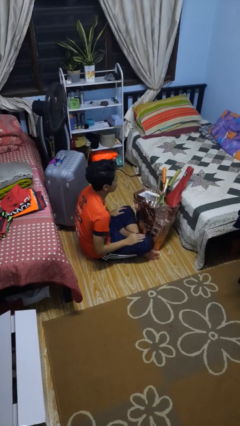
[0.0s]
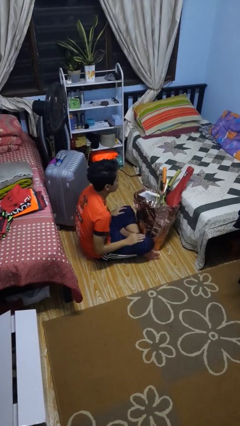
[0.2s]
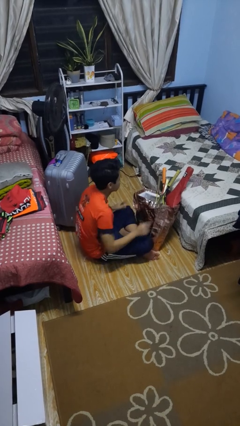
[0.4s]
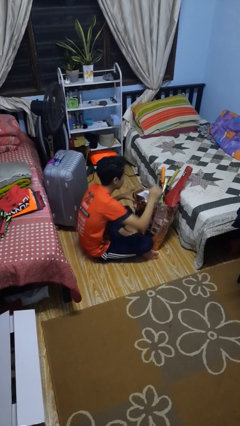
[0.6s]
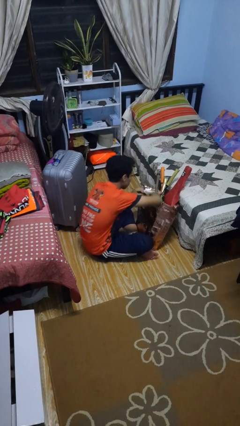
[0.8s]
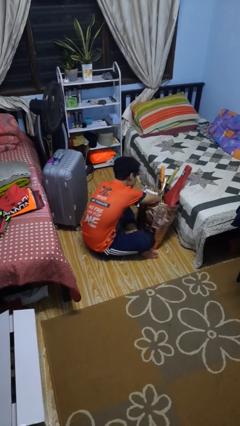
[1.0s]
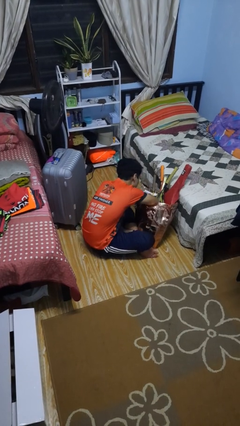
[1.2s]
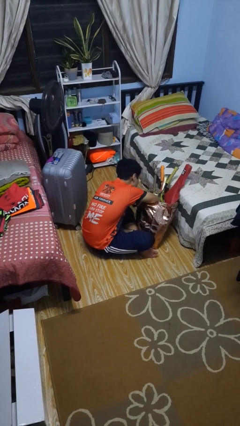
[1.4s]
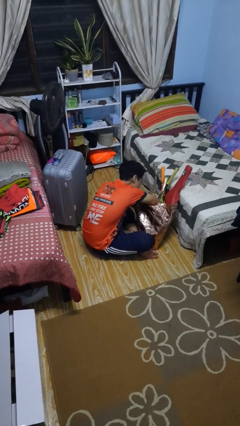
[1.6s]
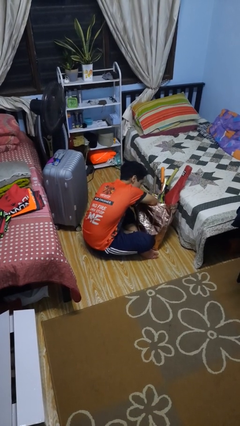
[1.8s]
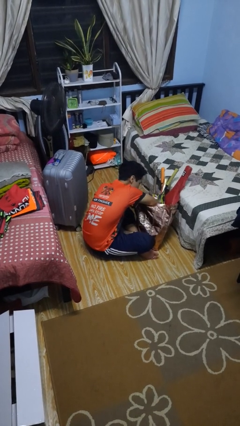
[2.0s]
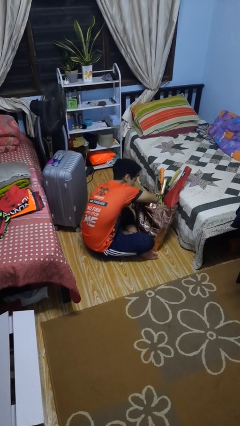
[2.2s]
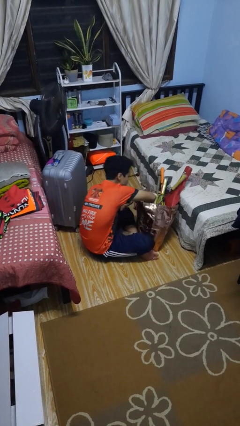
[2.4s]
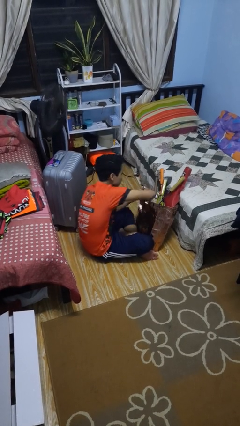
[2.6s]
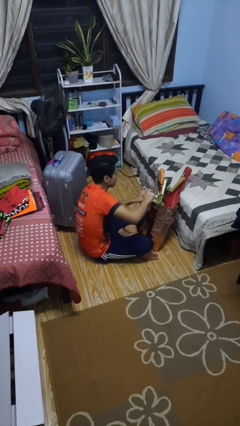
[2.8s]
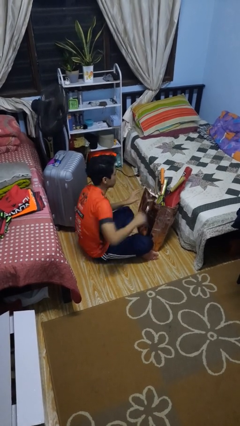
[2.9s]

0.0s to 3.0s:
person searches in bag

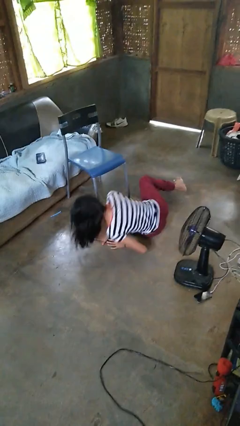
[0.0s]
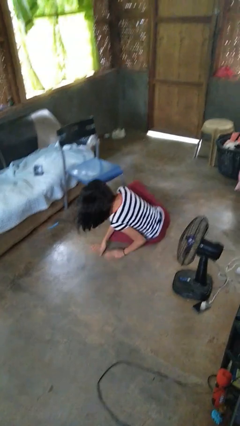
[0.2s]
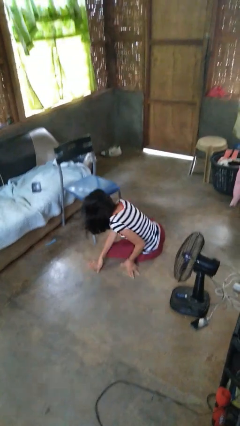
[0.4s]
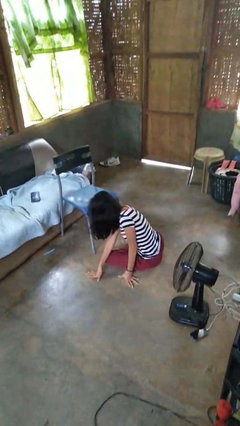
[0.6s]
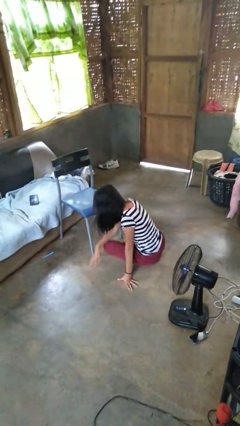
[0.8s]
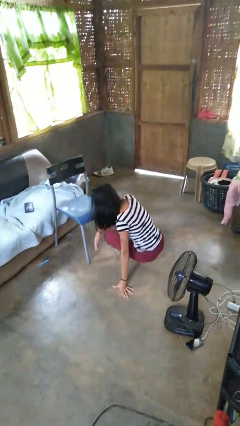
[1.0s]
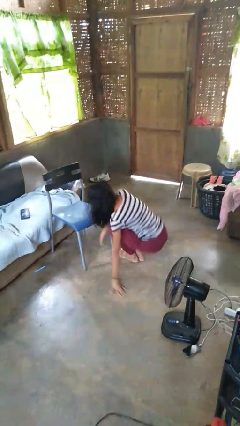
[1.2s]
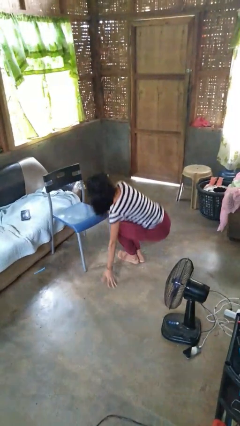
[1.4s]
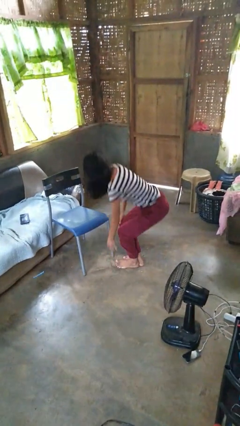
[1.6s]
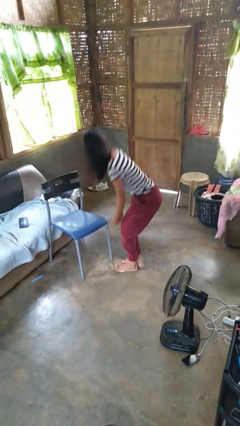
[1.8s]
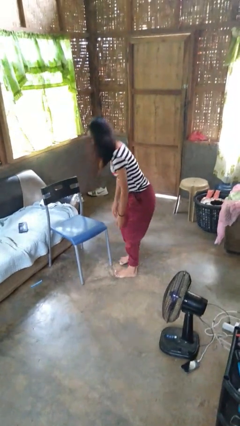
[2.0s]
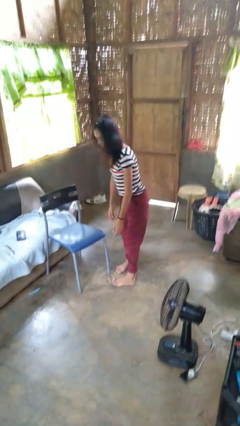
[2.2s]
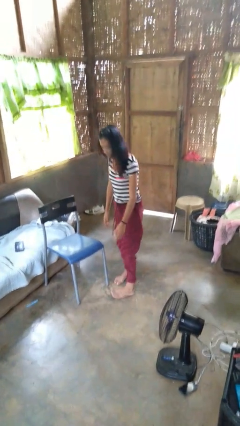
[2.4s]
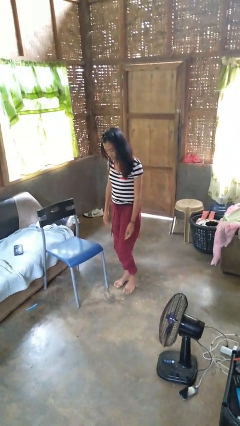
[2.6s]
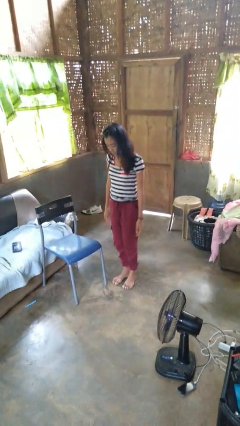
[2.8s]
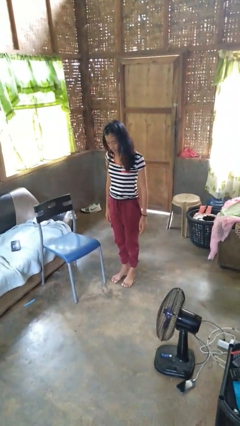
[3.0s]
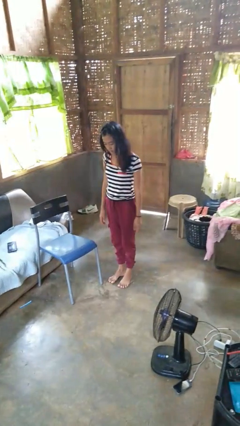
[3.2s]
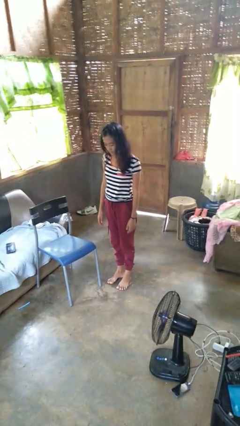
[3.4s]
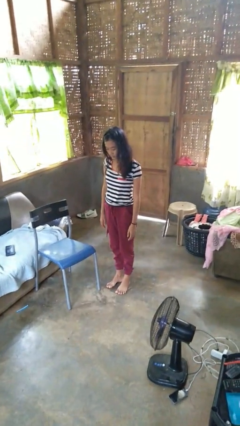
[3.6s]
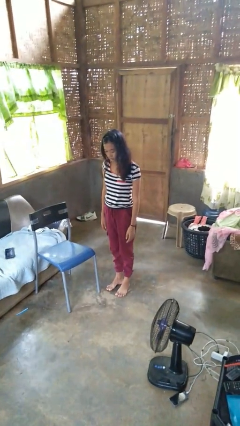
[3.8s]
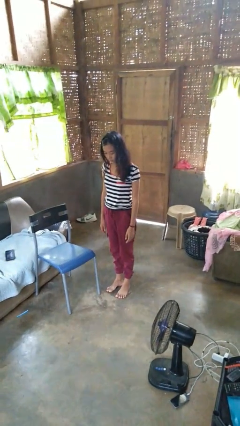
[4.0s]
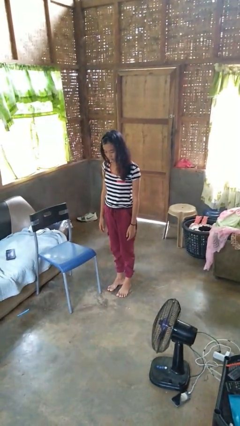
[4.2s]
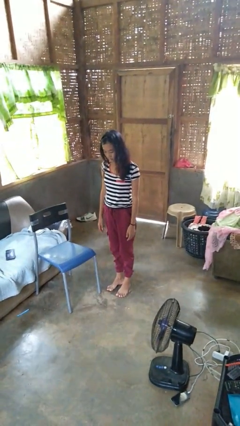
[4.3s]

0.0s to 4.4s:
person stands up from floor

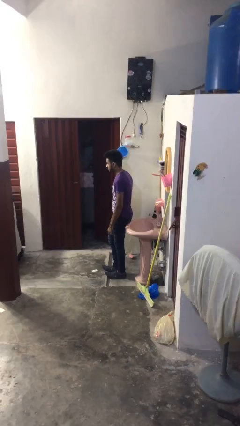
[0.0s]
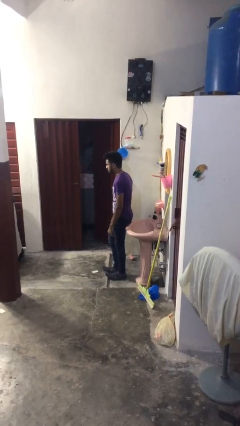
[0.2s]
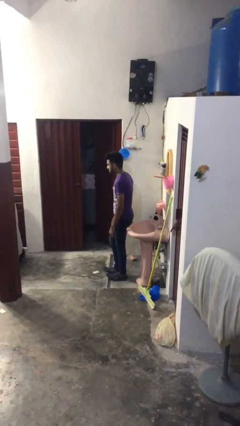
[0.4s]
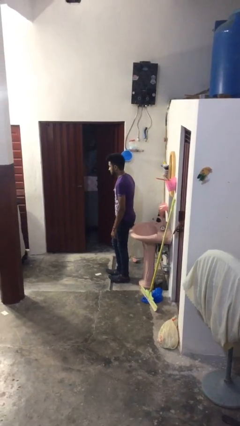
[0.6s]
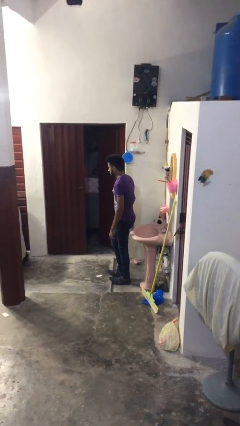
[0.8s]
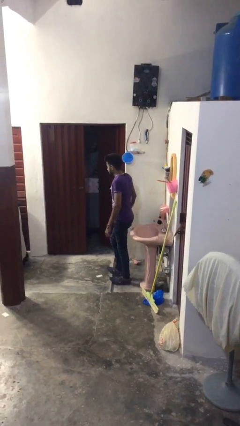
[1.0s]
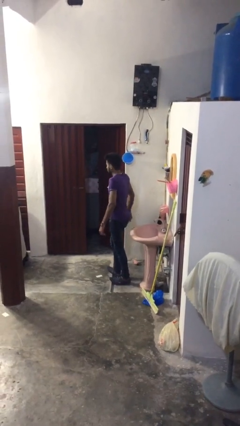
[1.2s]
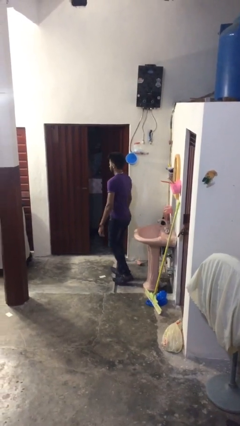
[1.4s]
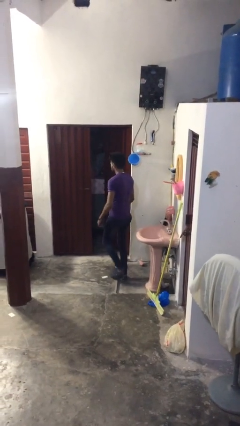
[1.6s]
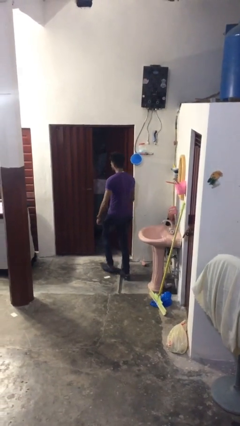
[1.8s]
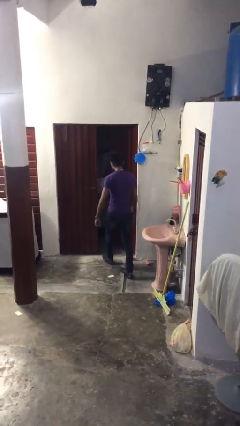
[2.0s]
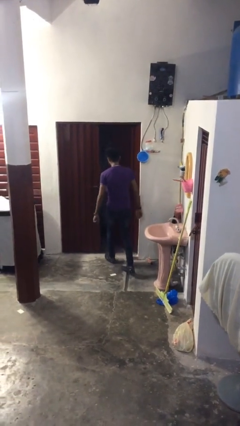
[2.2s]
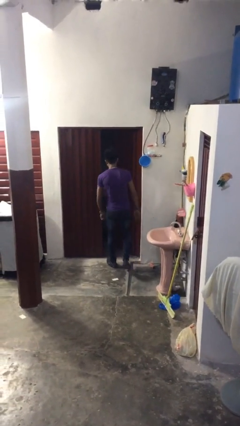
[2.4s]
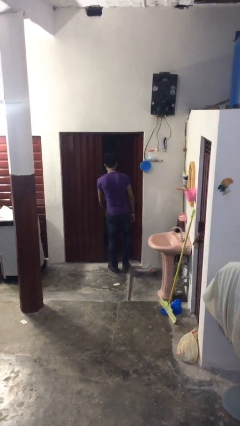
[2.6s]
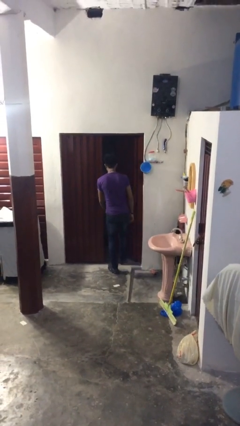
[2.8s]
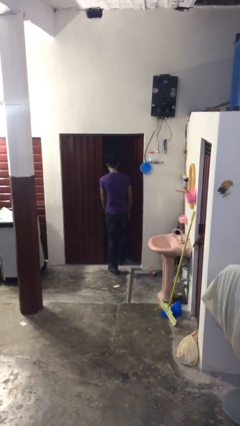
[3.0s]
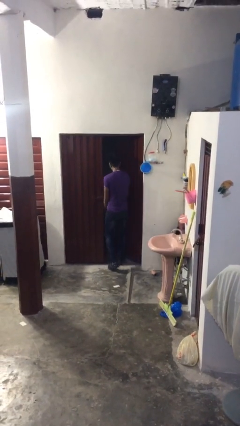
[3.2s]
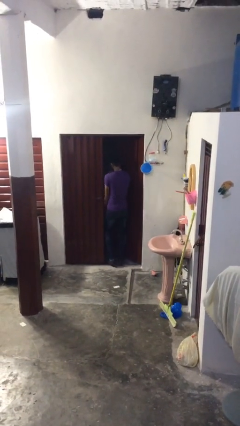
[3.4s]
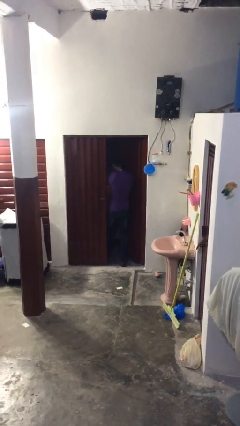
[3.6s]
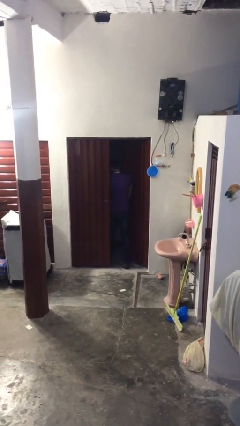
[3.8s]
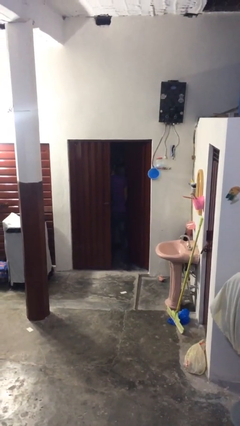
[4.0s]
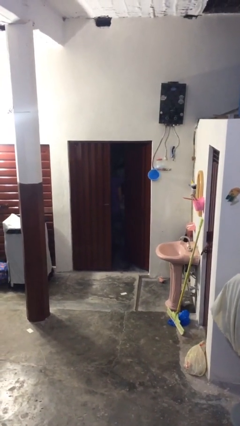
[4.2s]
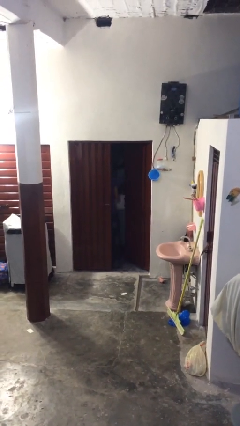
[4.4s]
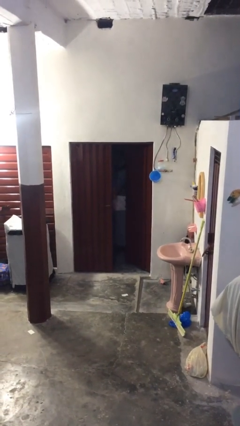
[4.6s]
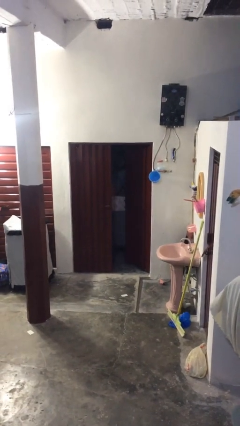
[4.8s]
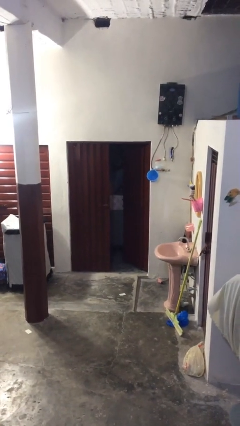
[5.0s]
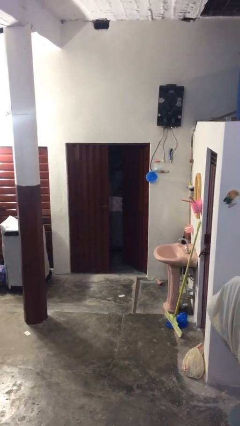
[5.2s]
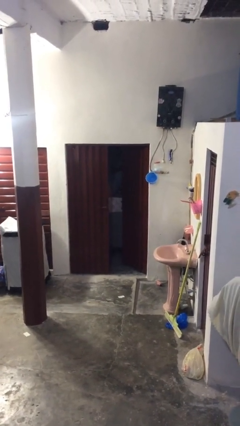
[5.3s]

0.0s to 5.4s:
person exits scene through structure

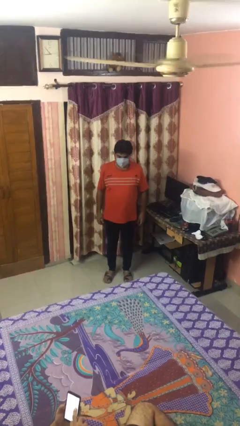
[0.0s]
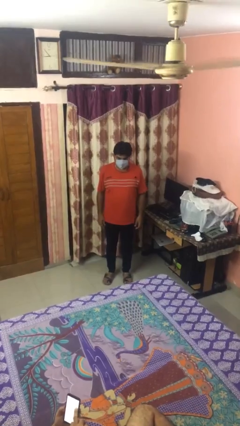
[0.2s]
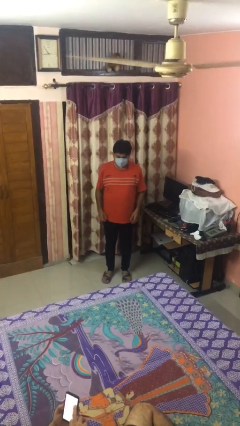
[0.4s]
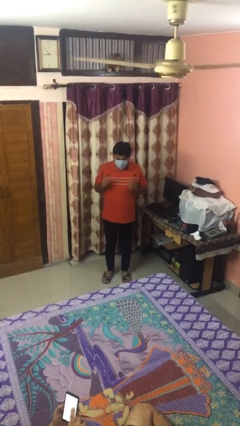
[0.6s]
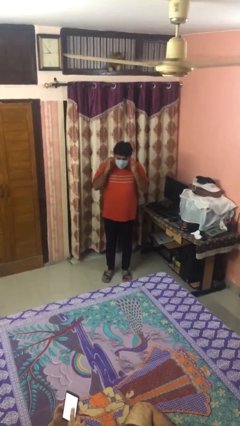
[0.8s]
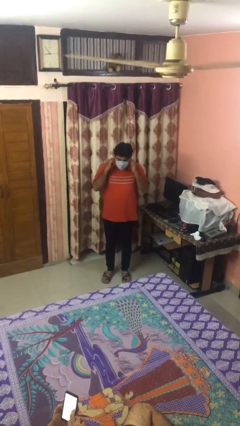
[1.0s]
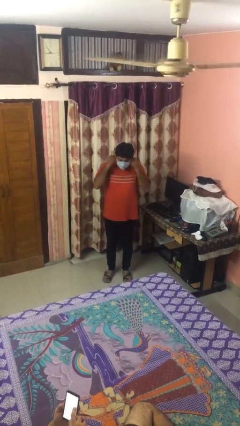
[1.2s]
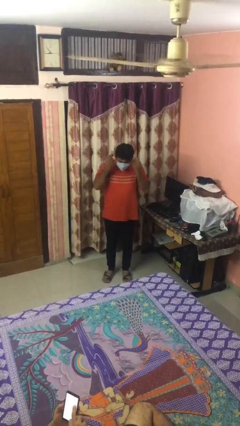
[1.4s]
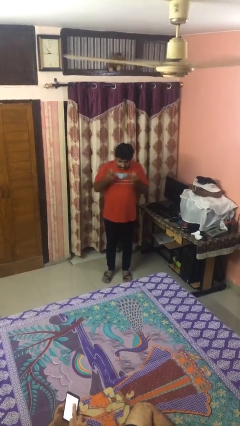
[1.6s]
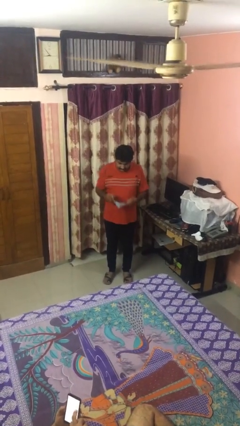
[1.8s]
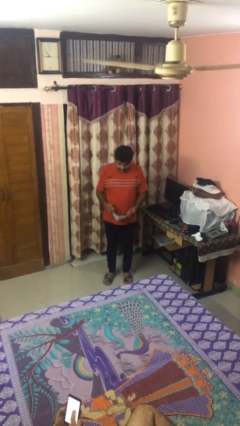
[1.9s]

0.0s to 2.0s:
person takes off facemask

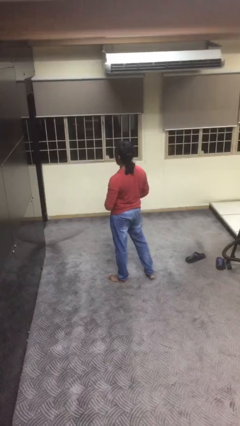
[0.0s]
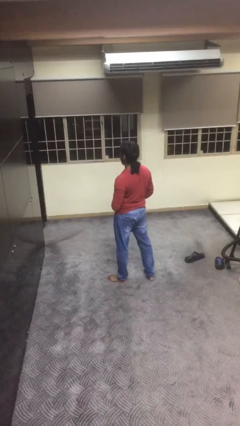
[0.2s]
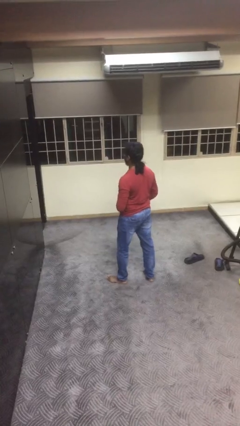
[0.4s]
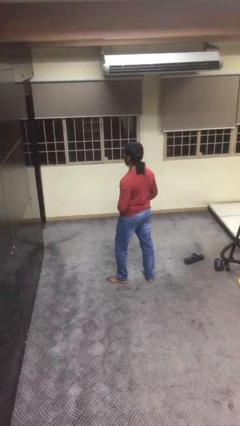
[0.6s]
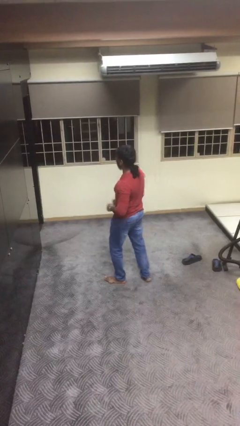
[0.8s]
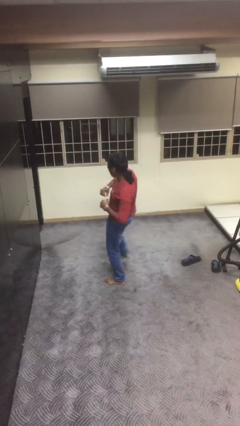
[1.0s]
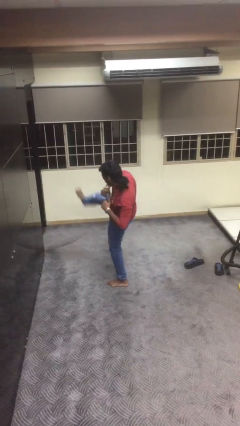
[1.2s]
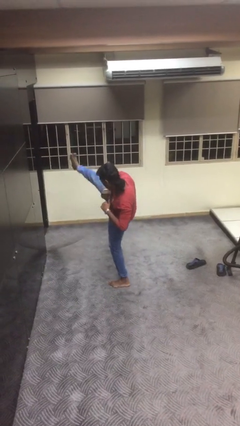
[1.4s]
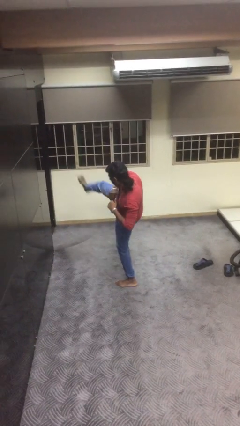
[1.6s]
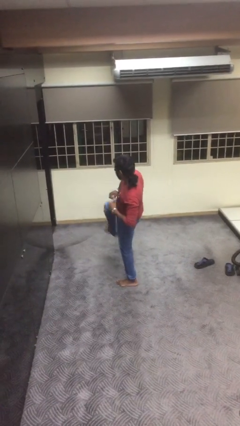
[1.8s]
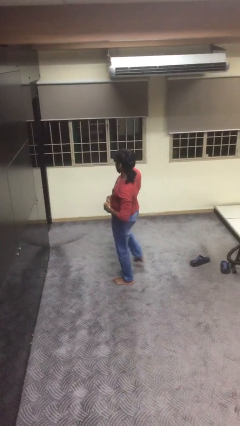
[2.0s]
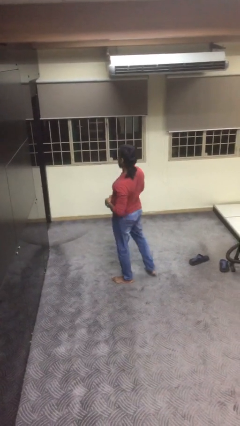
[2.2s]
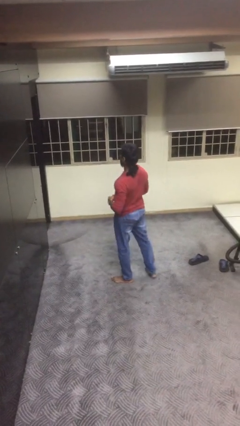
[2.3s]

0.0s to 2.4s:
person karate kicks

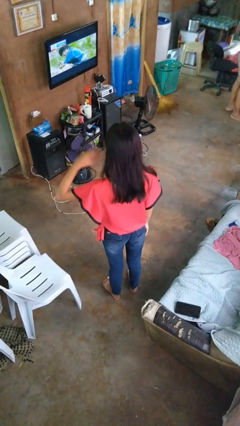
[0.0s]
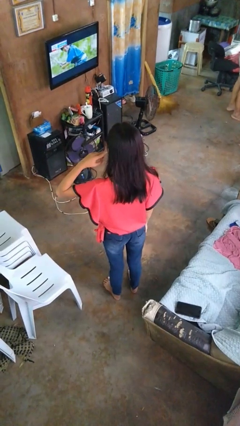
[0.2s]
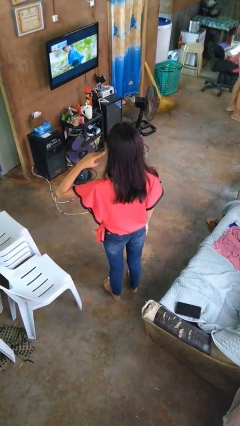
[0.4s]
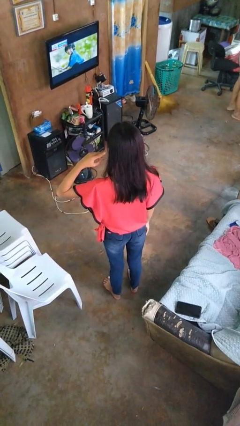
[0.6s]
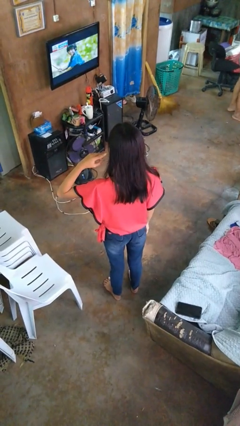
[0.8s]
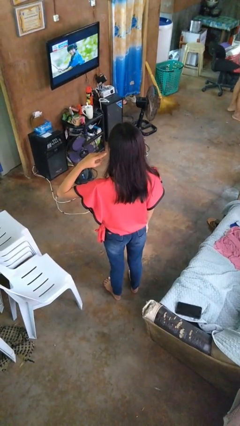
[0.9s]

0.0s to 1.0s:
person gestures listen closely
